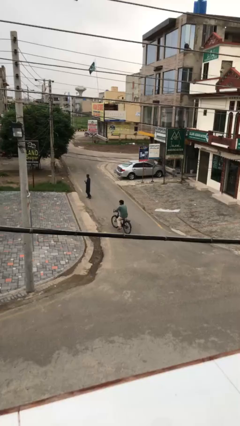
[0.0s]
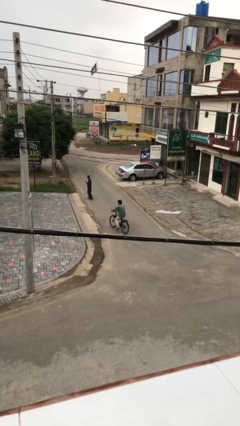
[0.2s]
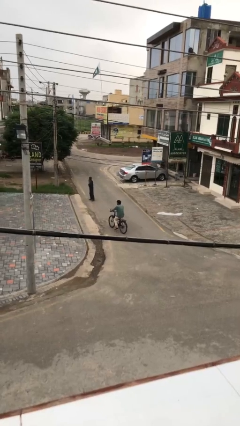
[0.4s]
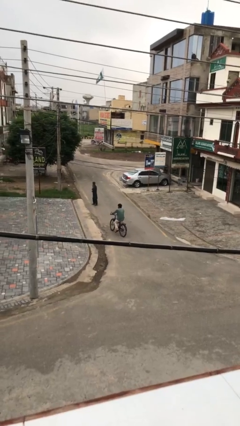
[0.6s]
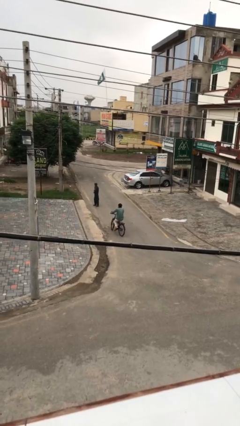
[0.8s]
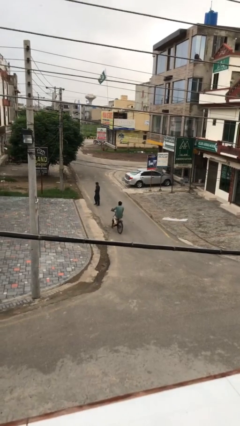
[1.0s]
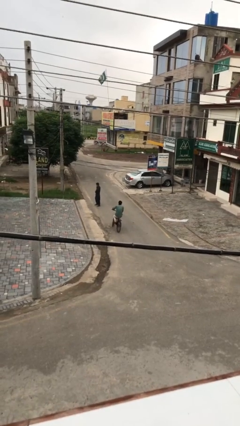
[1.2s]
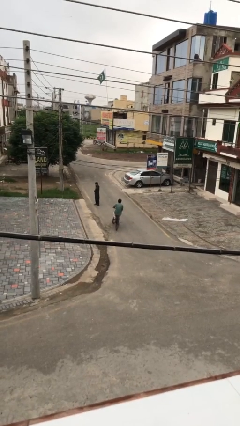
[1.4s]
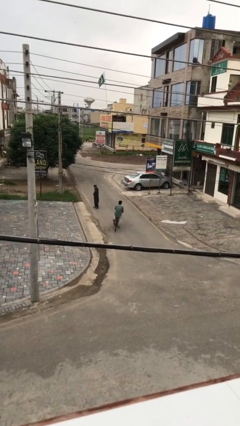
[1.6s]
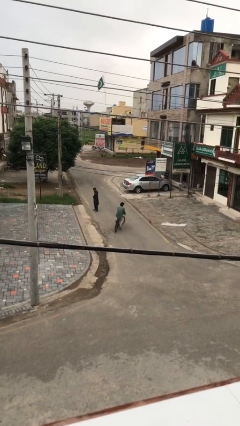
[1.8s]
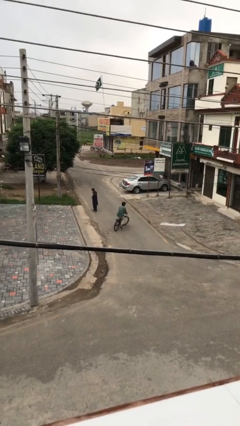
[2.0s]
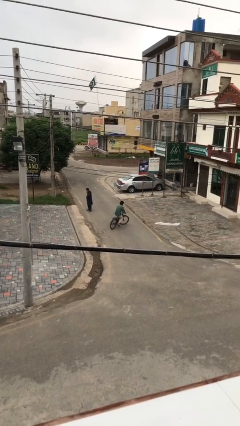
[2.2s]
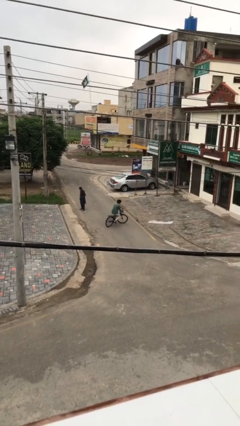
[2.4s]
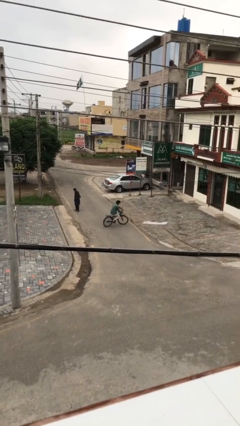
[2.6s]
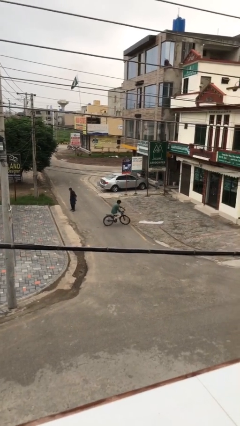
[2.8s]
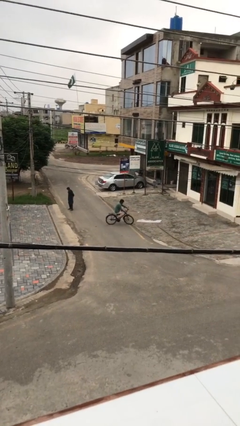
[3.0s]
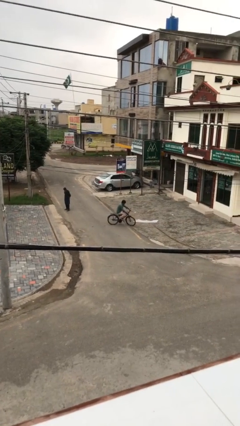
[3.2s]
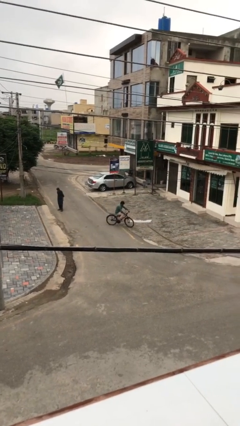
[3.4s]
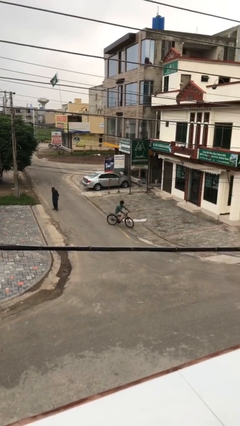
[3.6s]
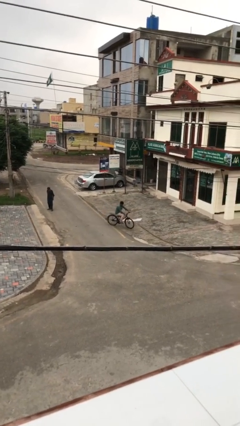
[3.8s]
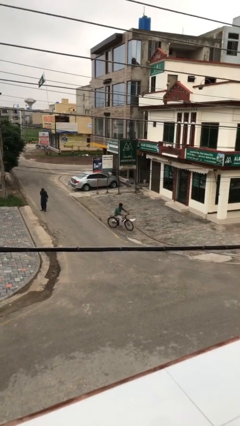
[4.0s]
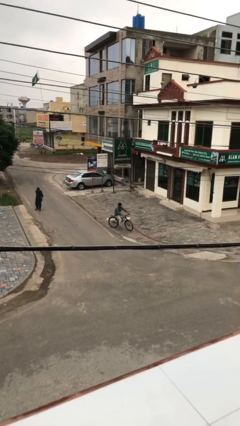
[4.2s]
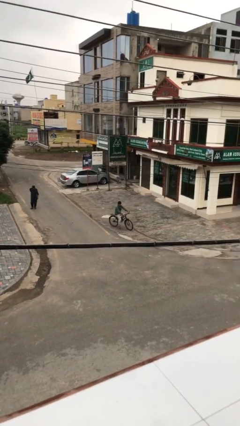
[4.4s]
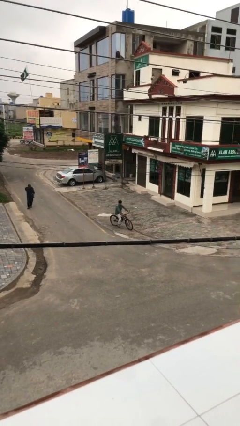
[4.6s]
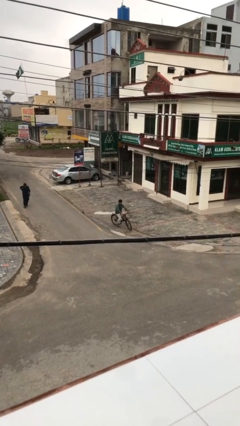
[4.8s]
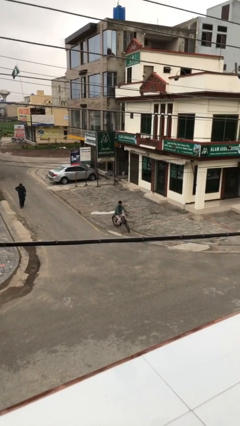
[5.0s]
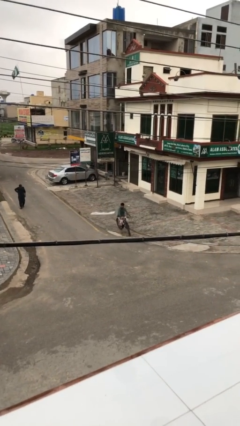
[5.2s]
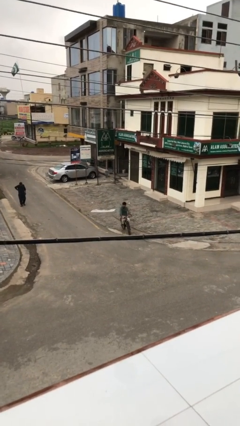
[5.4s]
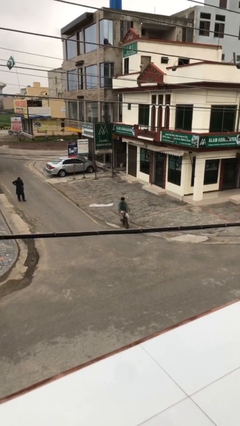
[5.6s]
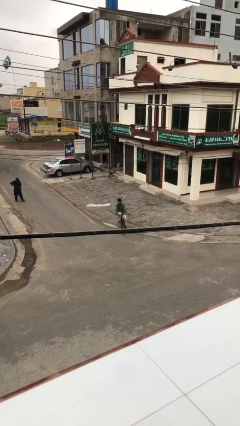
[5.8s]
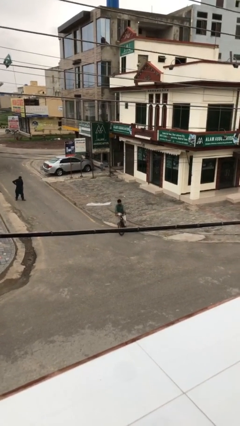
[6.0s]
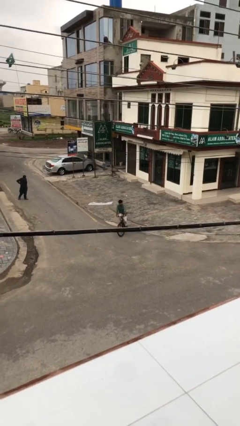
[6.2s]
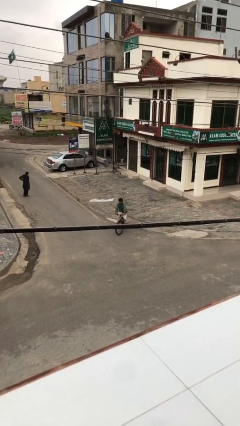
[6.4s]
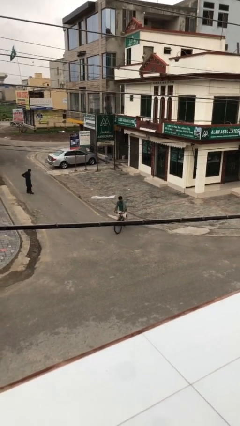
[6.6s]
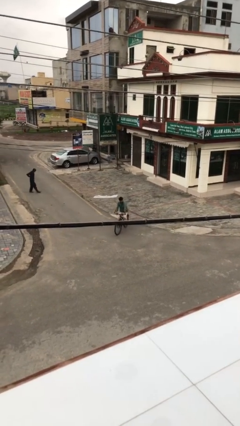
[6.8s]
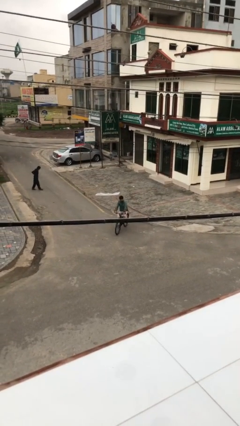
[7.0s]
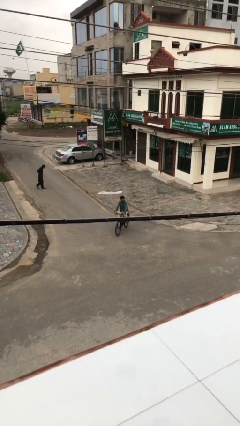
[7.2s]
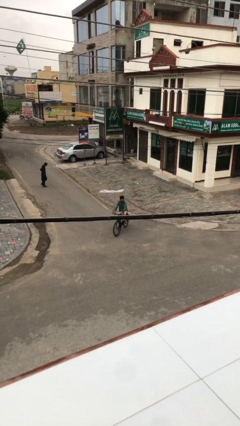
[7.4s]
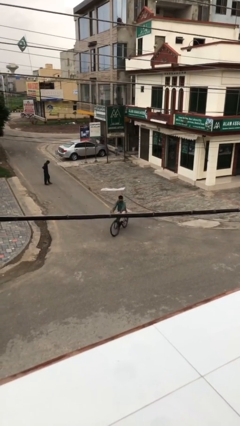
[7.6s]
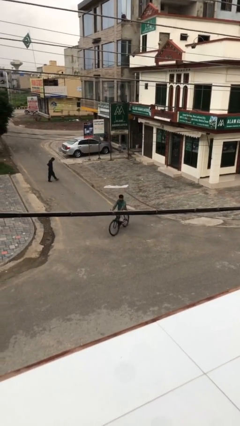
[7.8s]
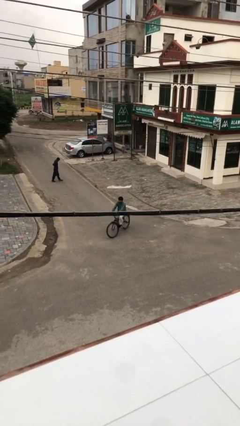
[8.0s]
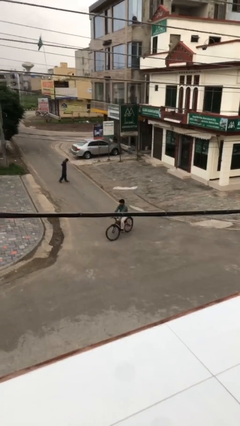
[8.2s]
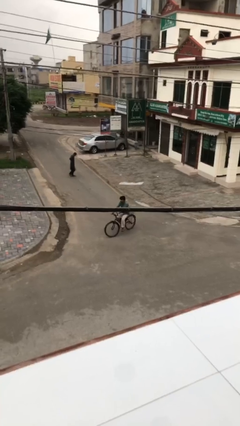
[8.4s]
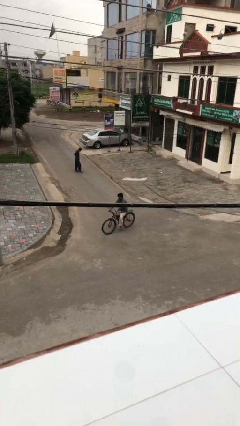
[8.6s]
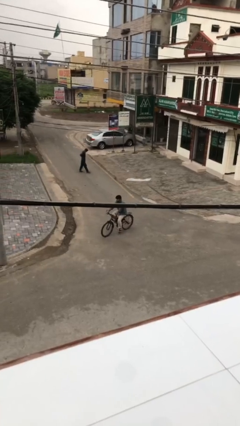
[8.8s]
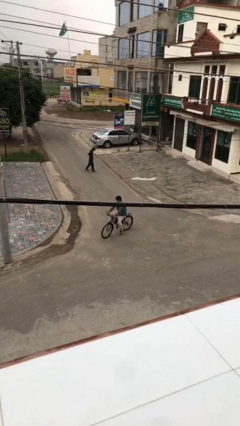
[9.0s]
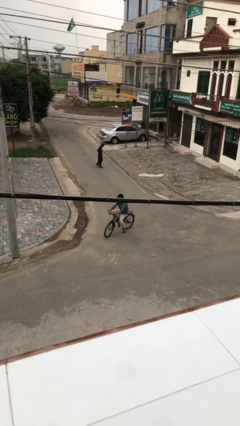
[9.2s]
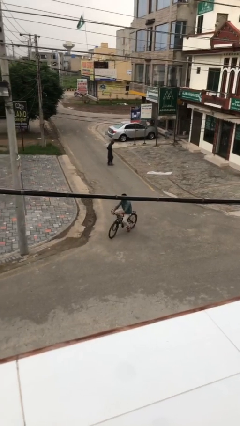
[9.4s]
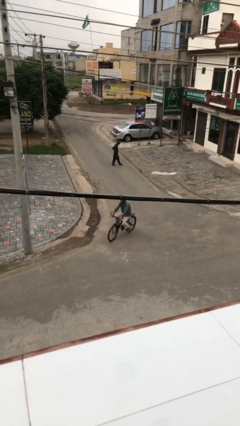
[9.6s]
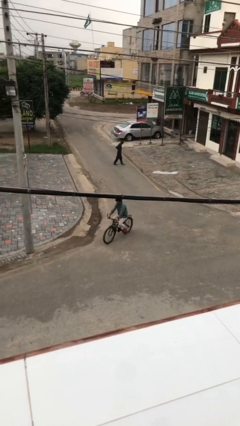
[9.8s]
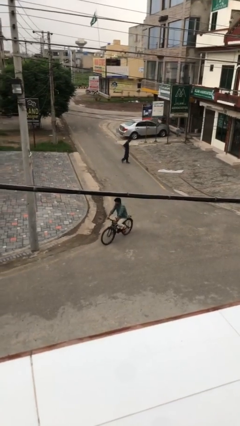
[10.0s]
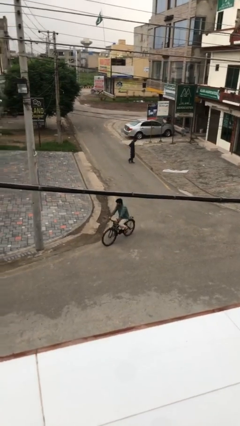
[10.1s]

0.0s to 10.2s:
person rides bicycle

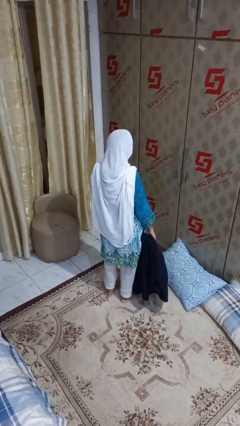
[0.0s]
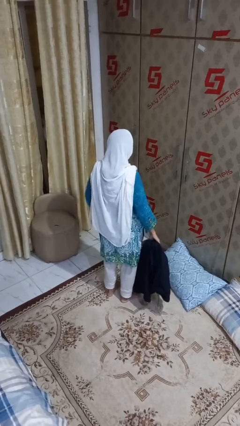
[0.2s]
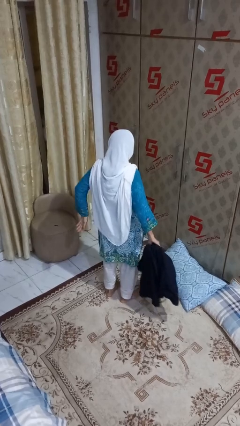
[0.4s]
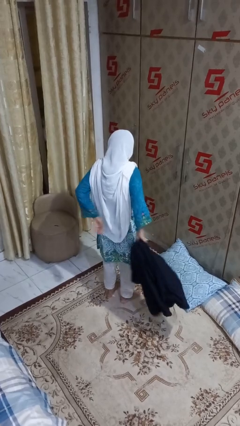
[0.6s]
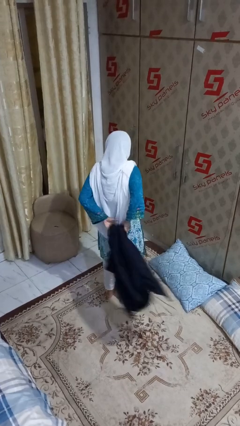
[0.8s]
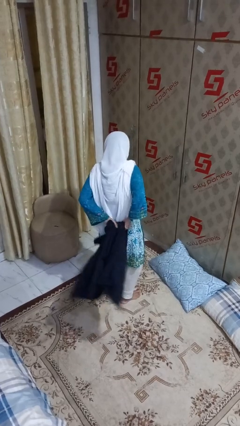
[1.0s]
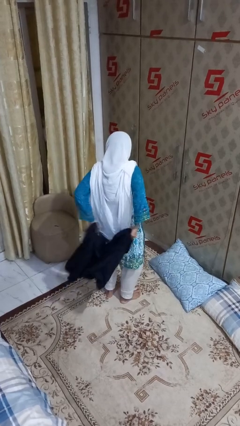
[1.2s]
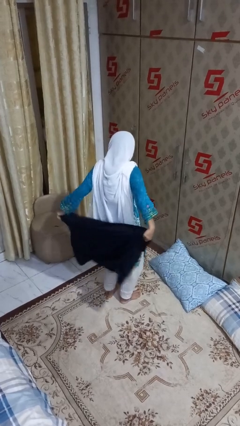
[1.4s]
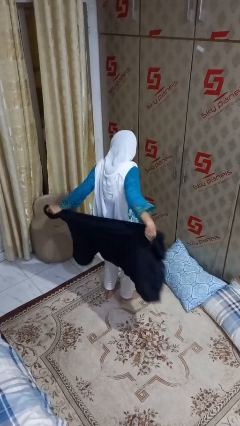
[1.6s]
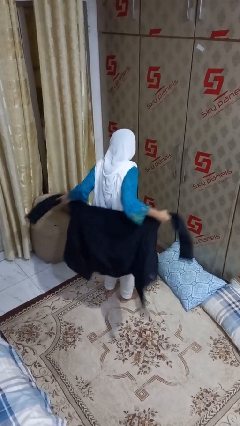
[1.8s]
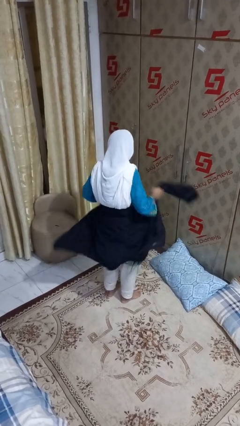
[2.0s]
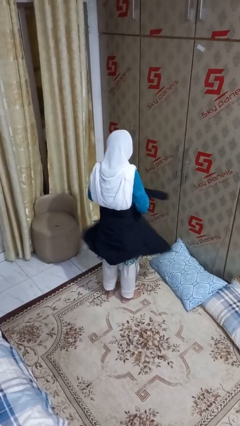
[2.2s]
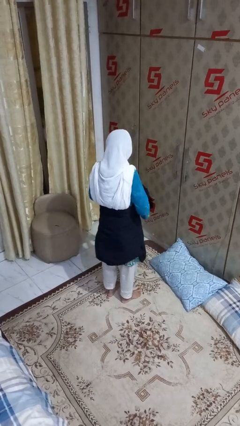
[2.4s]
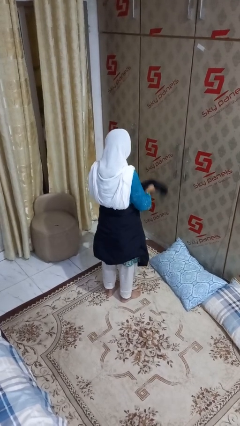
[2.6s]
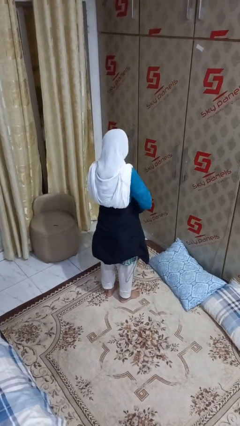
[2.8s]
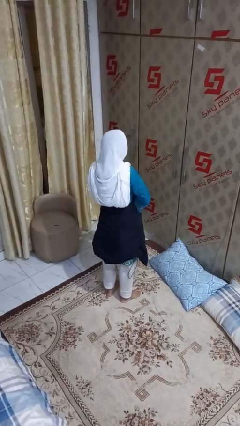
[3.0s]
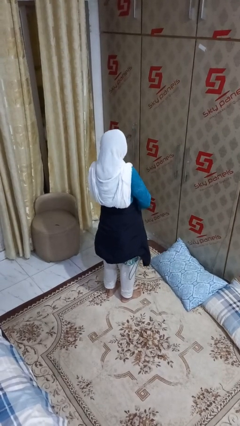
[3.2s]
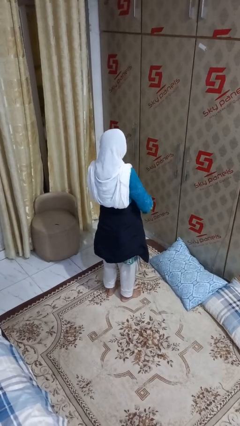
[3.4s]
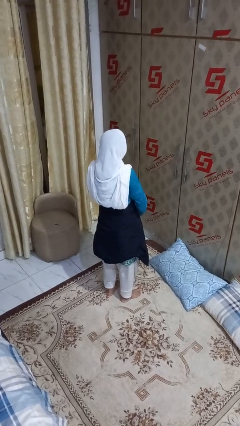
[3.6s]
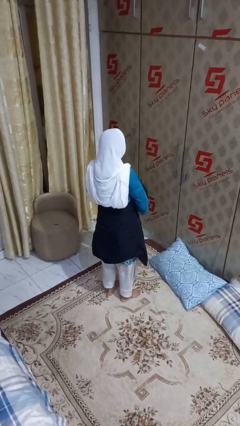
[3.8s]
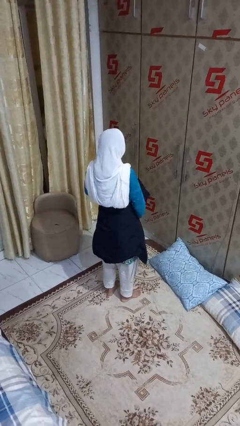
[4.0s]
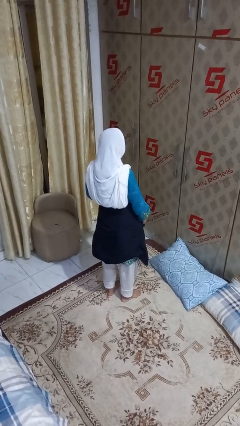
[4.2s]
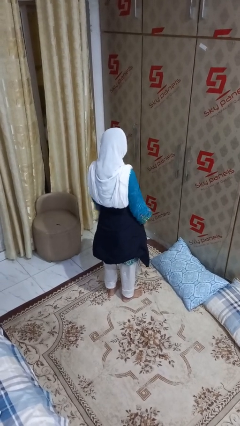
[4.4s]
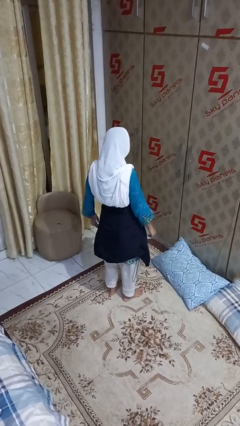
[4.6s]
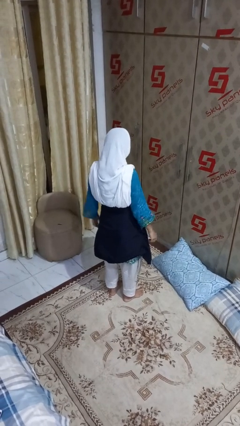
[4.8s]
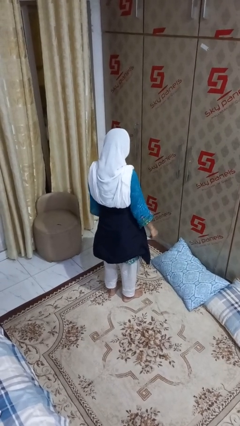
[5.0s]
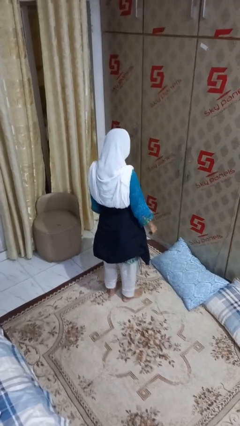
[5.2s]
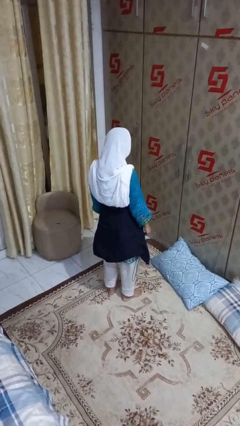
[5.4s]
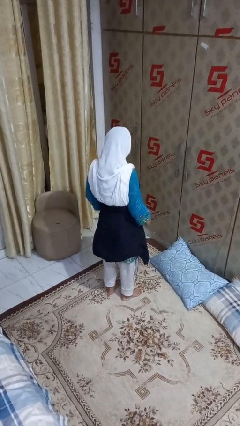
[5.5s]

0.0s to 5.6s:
person ties jacket around waist

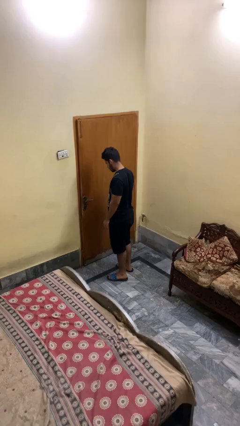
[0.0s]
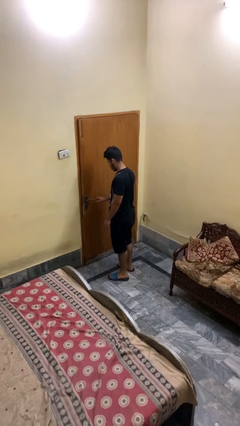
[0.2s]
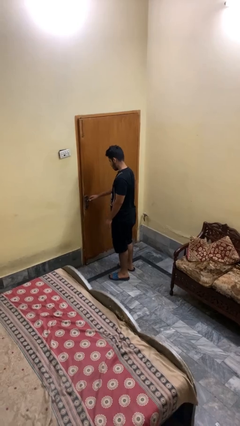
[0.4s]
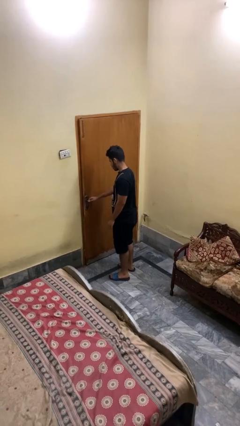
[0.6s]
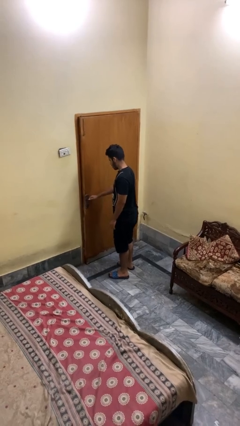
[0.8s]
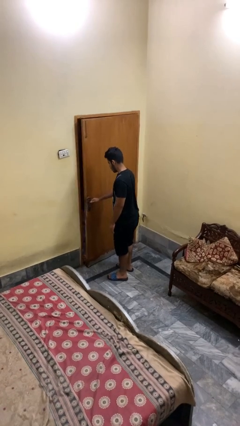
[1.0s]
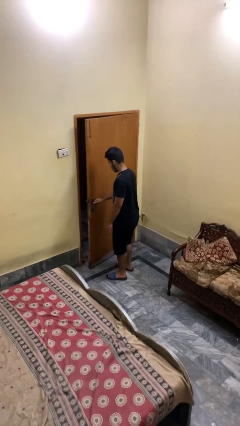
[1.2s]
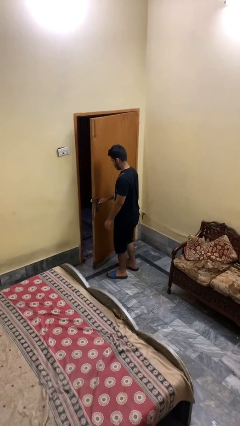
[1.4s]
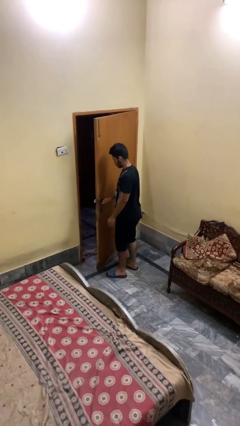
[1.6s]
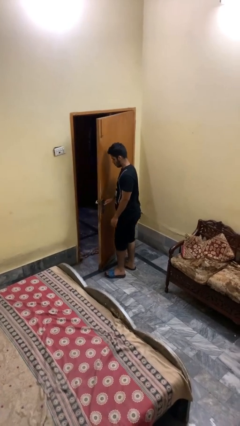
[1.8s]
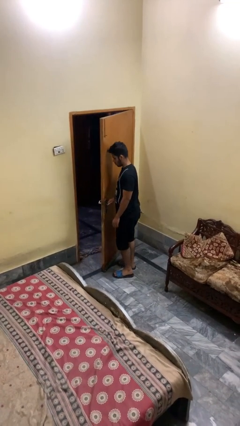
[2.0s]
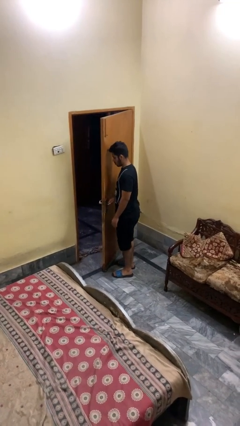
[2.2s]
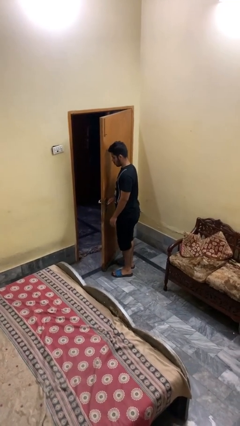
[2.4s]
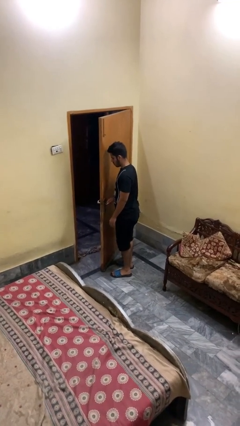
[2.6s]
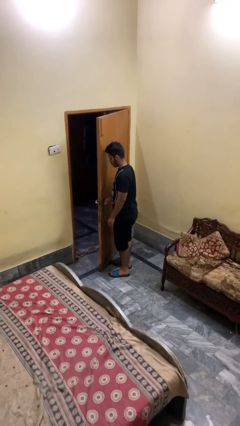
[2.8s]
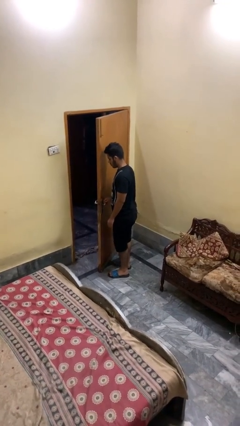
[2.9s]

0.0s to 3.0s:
person opens facility door
